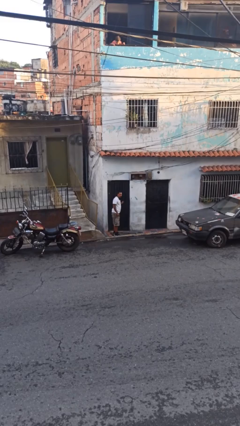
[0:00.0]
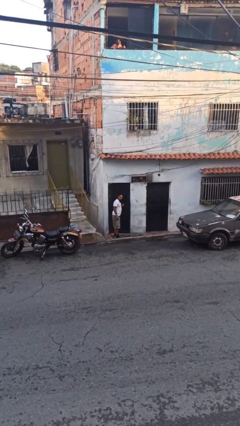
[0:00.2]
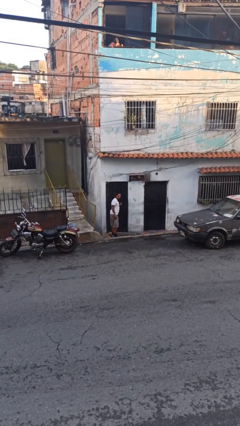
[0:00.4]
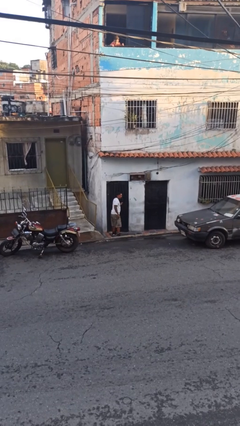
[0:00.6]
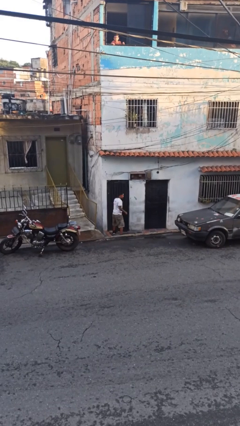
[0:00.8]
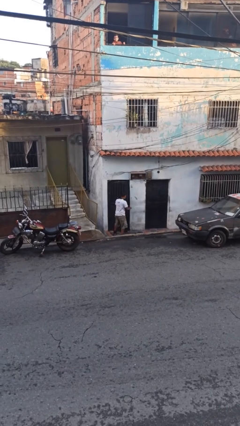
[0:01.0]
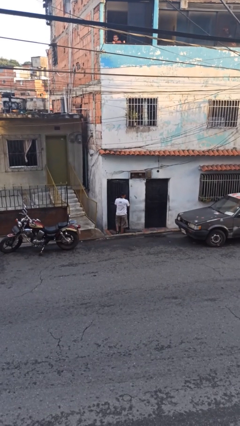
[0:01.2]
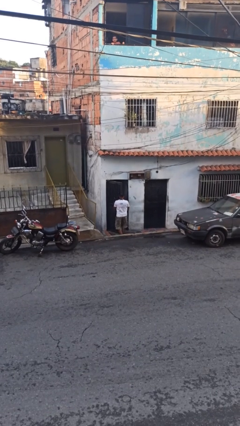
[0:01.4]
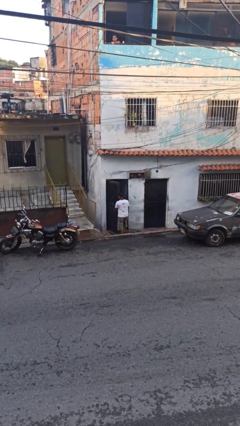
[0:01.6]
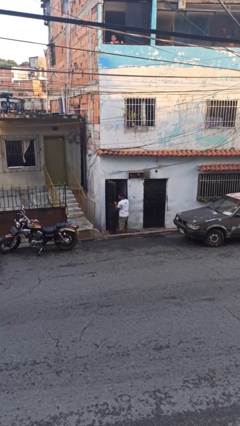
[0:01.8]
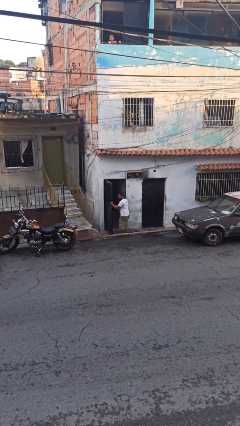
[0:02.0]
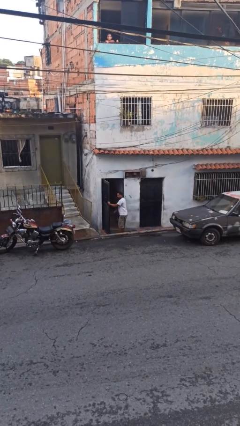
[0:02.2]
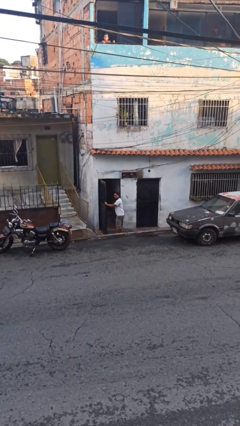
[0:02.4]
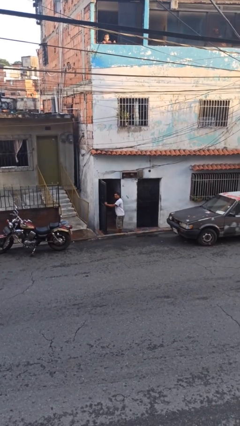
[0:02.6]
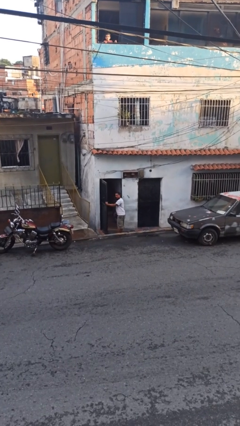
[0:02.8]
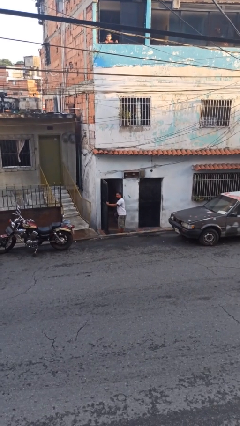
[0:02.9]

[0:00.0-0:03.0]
person opens facility door

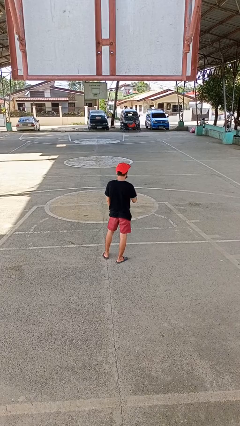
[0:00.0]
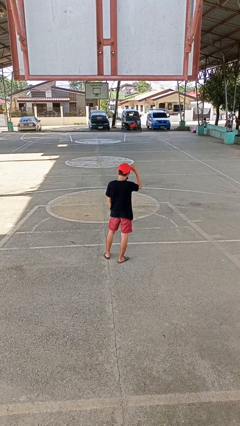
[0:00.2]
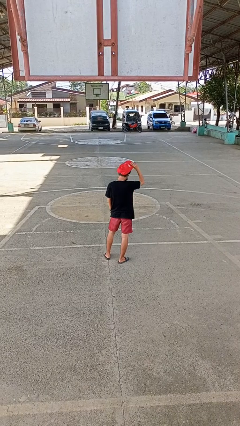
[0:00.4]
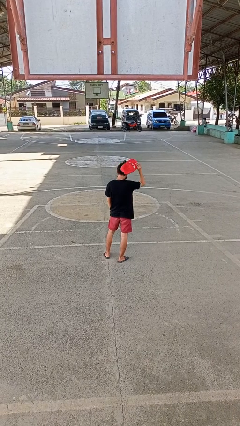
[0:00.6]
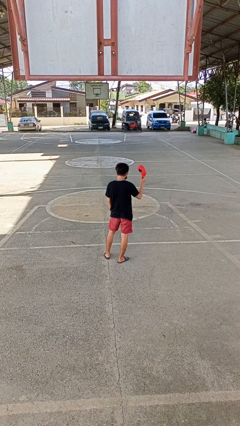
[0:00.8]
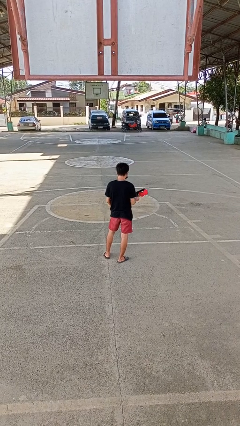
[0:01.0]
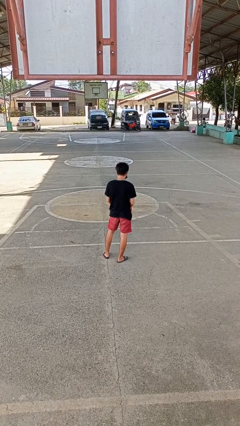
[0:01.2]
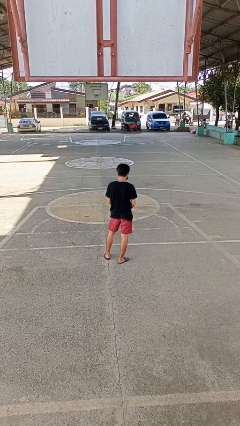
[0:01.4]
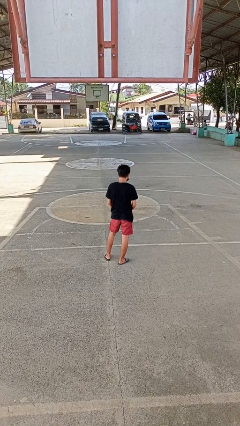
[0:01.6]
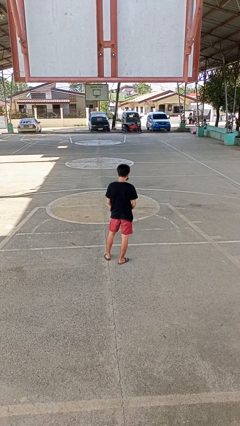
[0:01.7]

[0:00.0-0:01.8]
person takes off hat

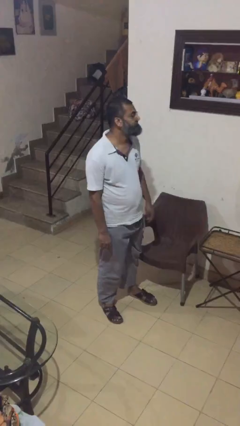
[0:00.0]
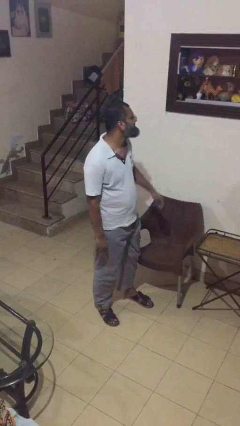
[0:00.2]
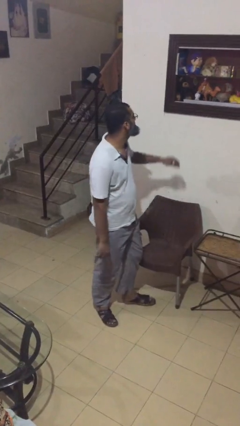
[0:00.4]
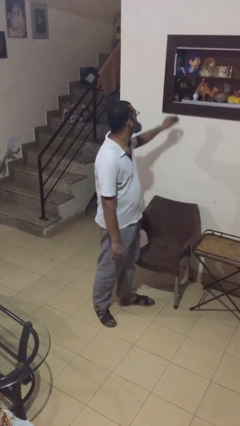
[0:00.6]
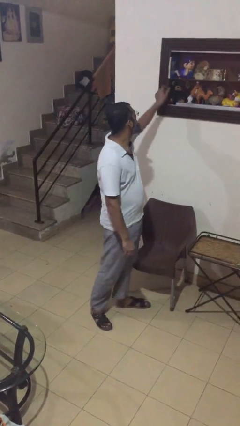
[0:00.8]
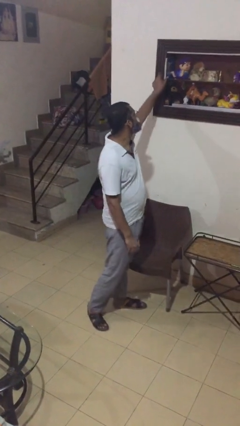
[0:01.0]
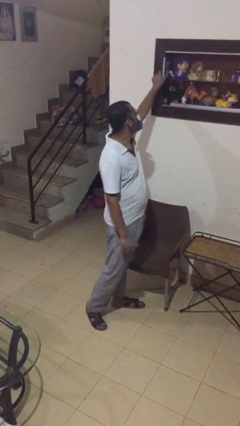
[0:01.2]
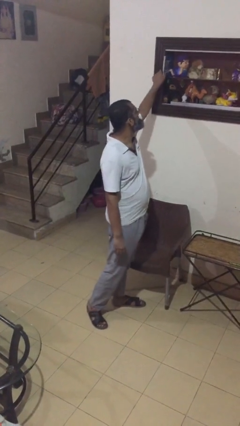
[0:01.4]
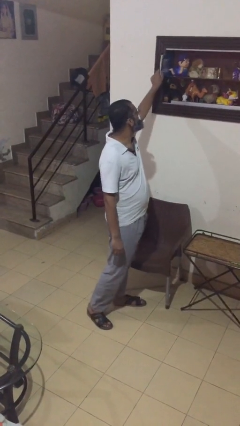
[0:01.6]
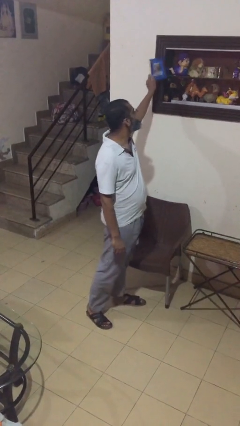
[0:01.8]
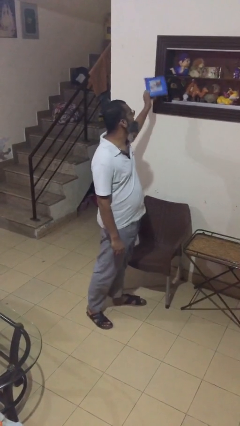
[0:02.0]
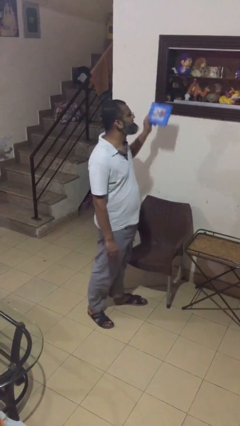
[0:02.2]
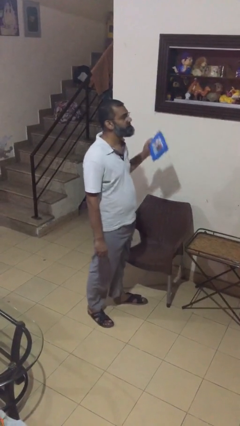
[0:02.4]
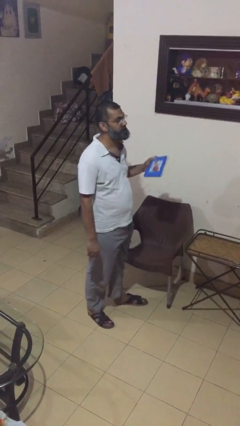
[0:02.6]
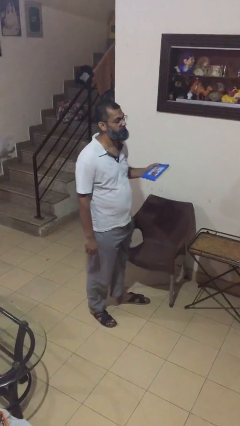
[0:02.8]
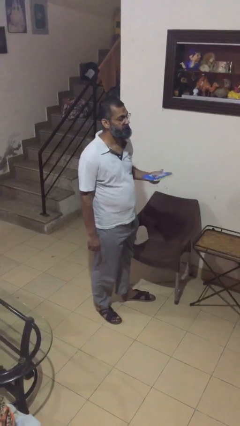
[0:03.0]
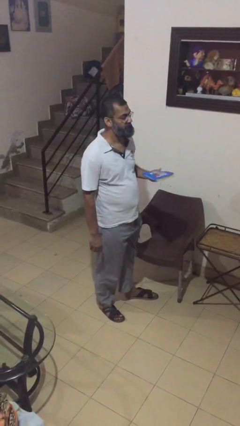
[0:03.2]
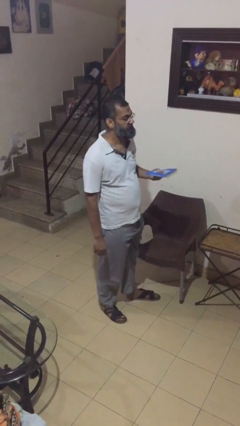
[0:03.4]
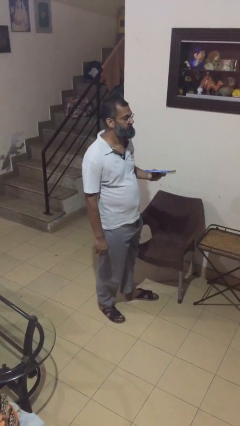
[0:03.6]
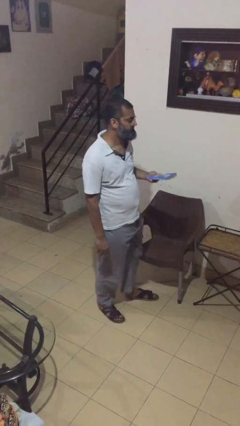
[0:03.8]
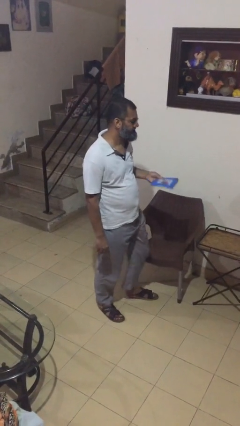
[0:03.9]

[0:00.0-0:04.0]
person picks up object from shelf

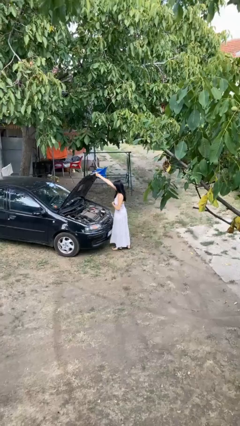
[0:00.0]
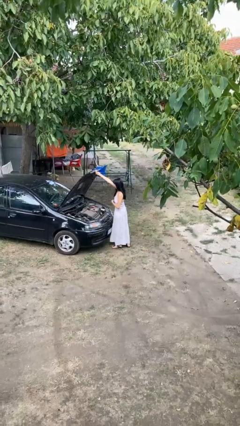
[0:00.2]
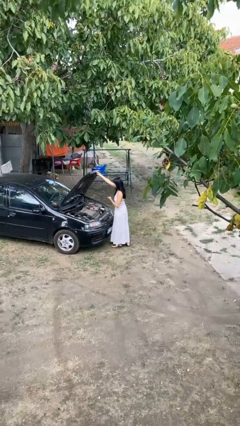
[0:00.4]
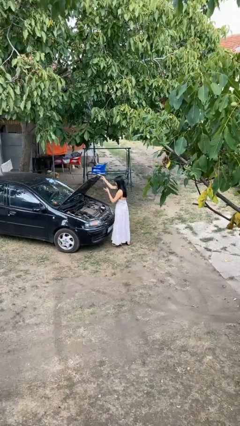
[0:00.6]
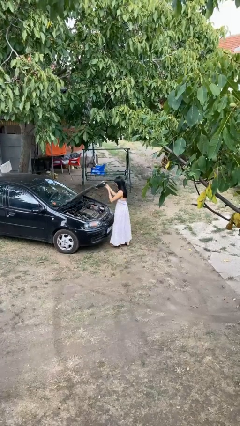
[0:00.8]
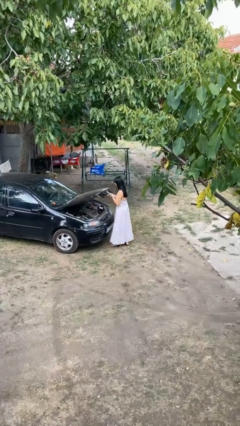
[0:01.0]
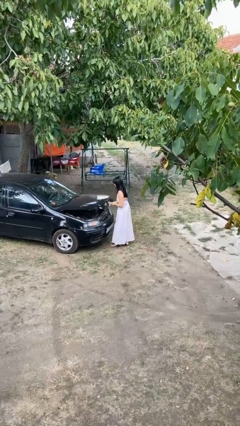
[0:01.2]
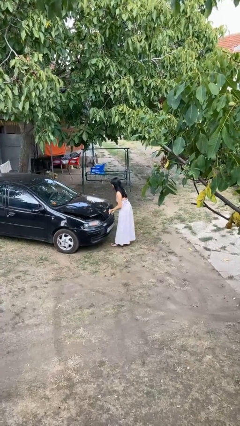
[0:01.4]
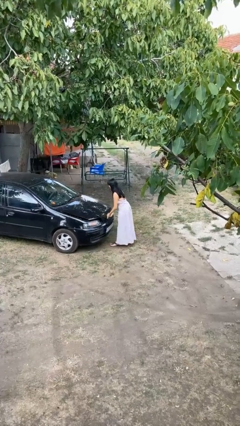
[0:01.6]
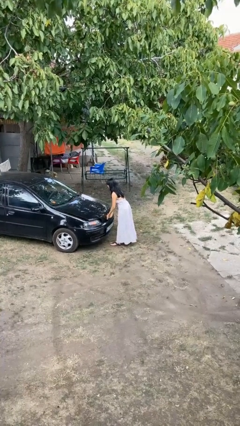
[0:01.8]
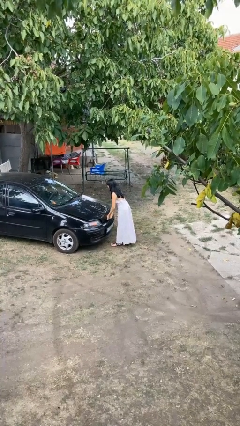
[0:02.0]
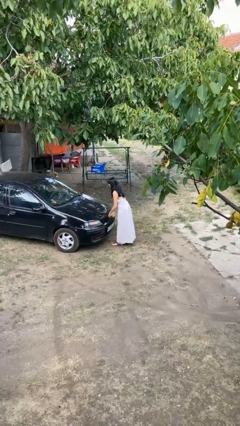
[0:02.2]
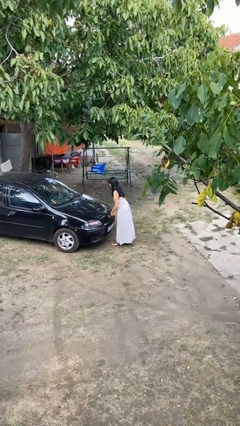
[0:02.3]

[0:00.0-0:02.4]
person closes car hood

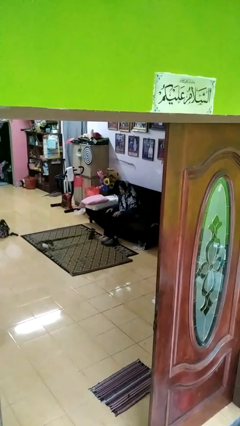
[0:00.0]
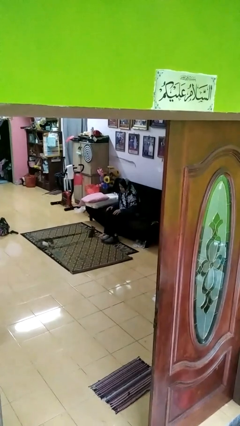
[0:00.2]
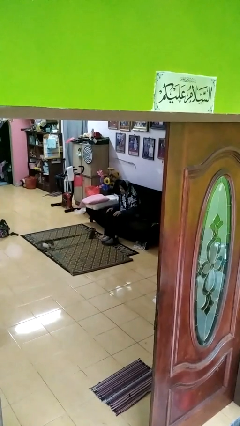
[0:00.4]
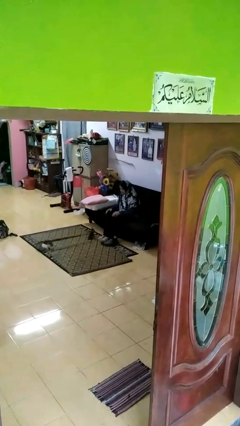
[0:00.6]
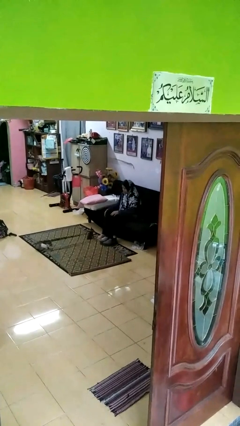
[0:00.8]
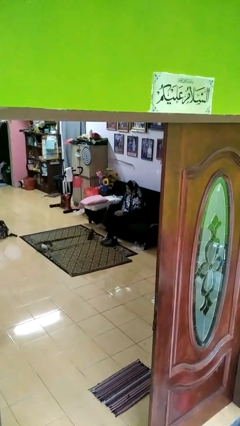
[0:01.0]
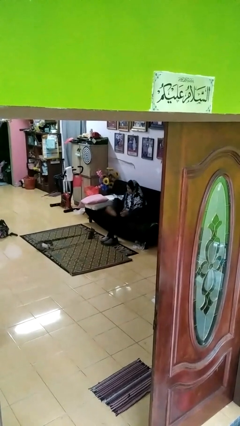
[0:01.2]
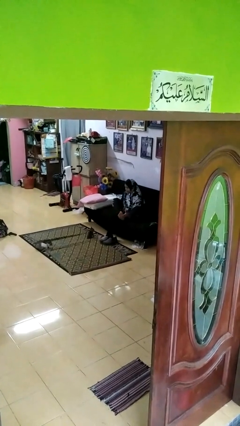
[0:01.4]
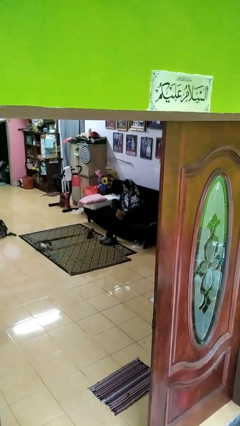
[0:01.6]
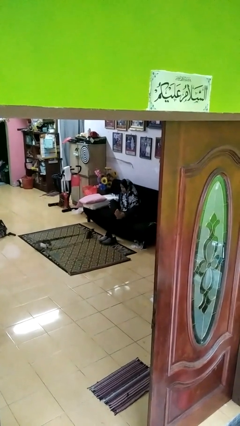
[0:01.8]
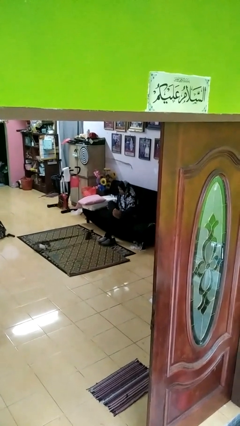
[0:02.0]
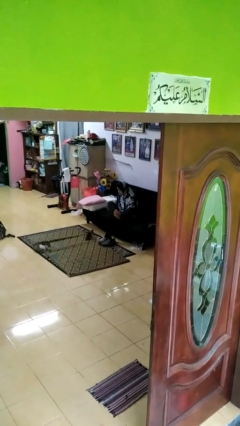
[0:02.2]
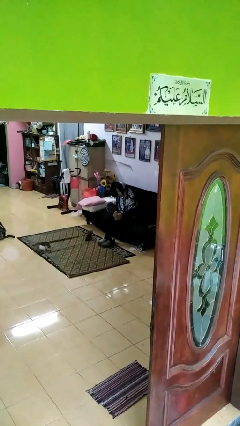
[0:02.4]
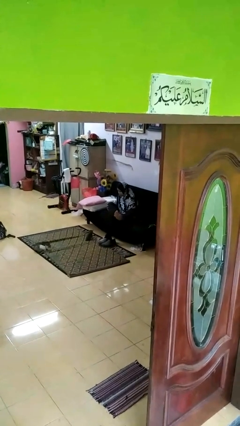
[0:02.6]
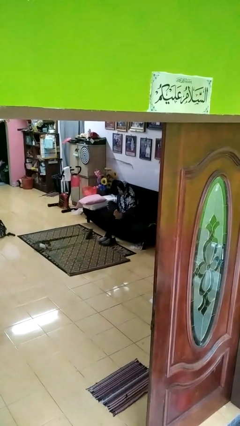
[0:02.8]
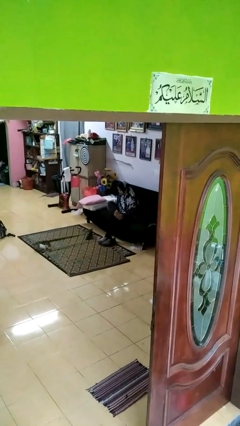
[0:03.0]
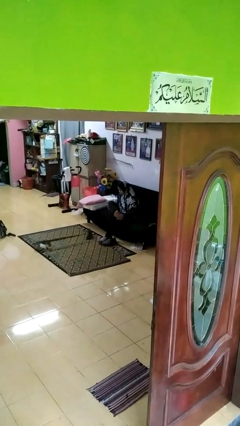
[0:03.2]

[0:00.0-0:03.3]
person rubs foot

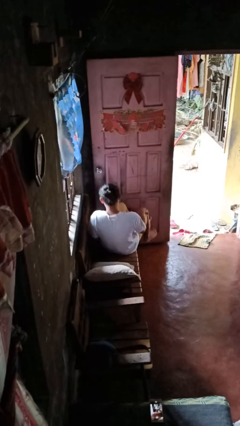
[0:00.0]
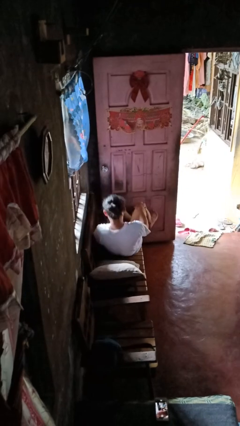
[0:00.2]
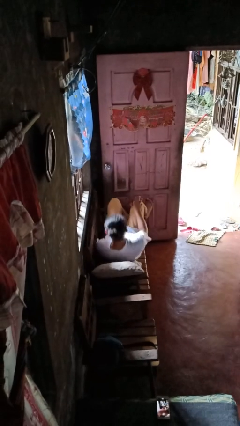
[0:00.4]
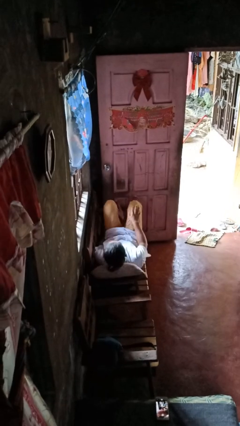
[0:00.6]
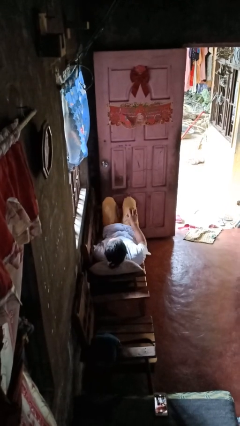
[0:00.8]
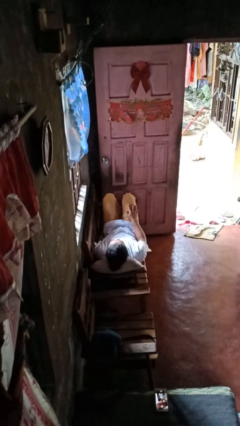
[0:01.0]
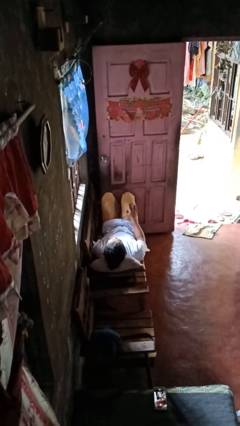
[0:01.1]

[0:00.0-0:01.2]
person lies down on couch

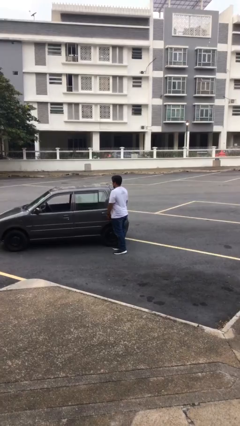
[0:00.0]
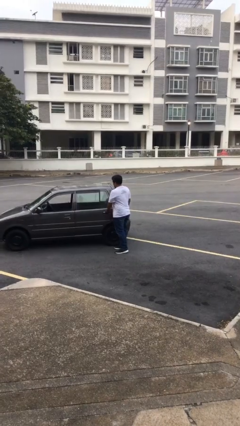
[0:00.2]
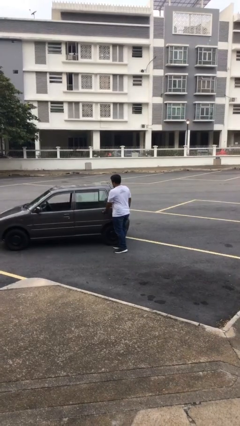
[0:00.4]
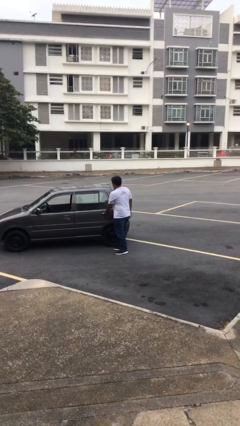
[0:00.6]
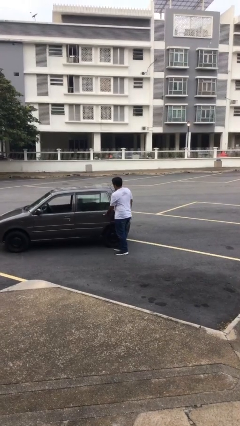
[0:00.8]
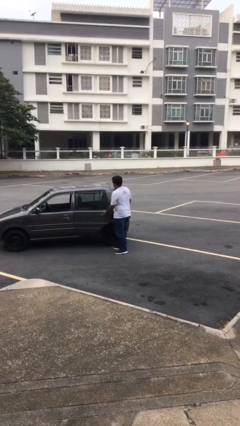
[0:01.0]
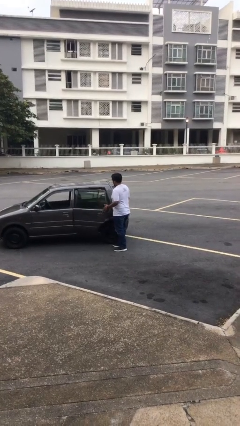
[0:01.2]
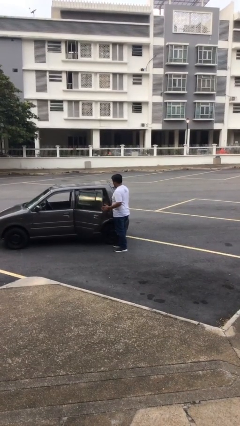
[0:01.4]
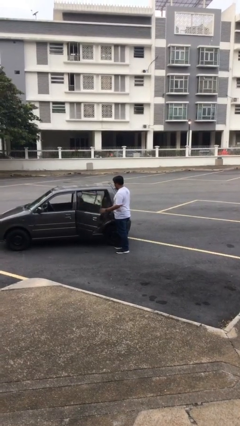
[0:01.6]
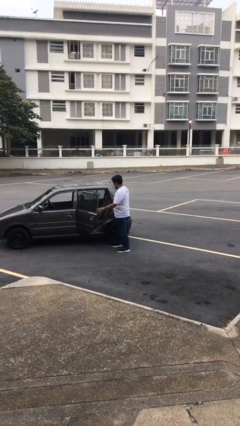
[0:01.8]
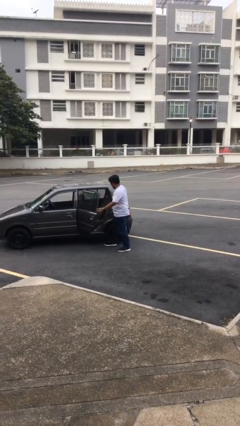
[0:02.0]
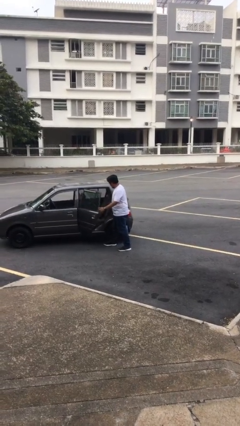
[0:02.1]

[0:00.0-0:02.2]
person opens car door
